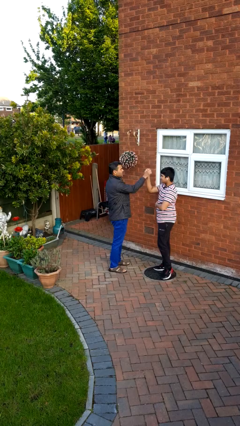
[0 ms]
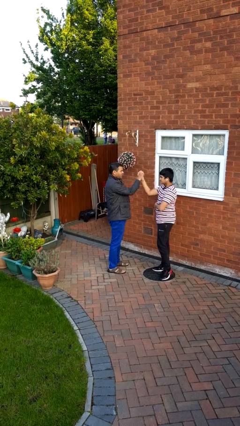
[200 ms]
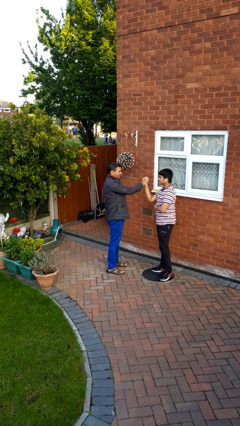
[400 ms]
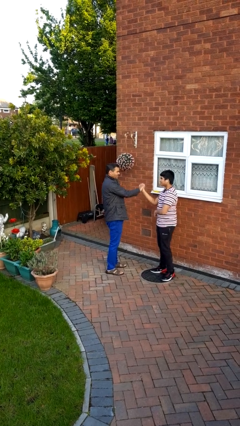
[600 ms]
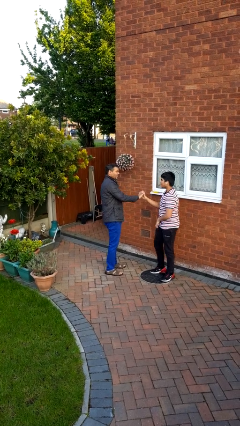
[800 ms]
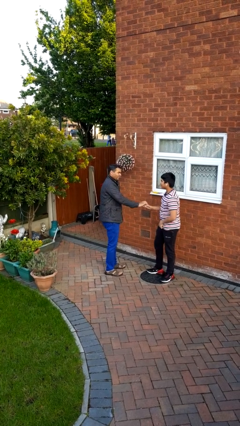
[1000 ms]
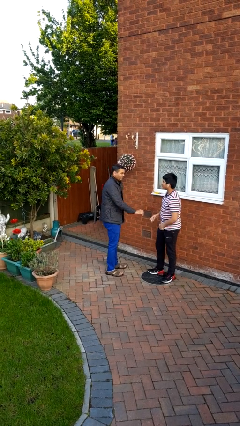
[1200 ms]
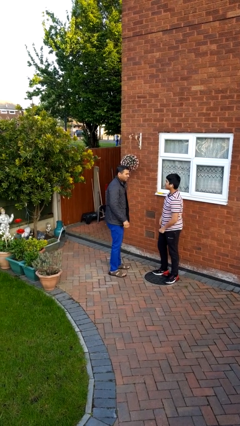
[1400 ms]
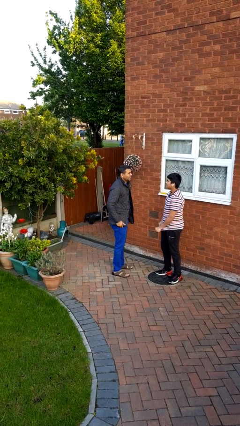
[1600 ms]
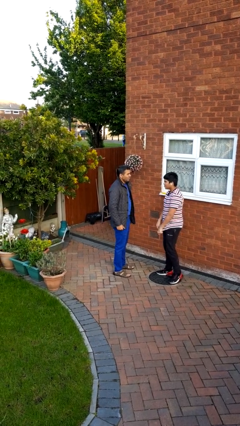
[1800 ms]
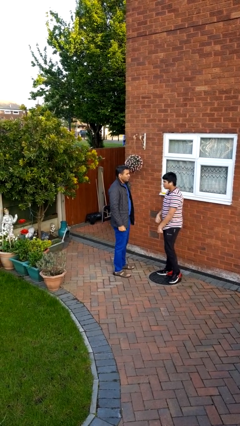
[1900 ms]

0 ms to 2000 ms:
person highfives hand

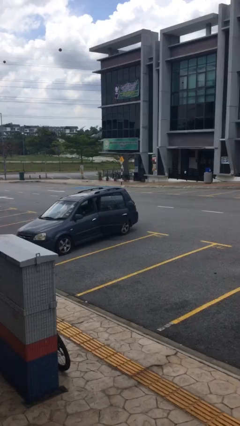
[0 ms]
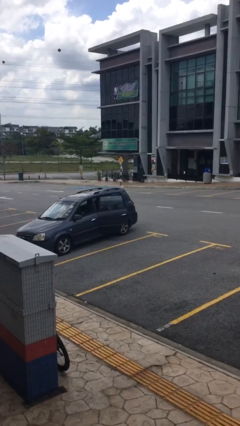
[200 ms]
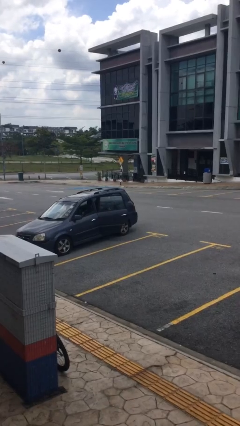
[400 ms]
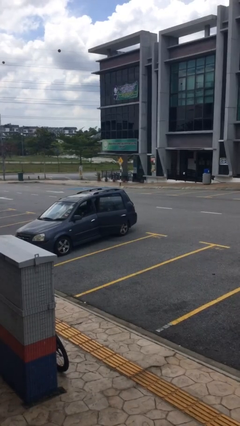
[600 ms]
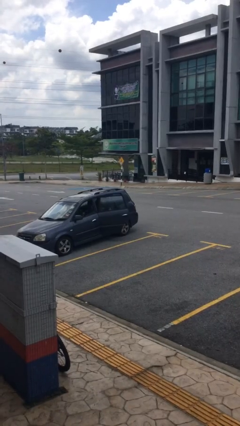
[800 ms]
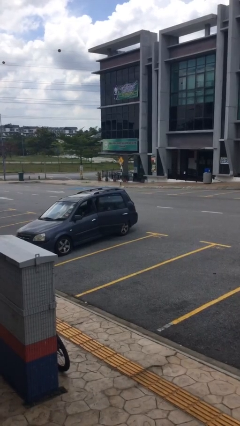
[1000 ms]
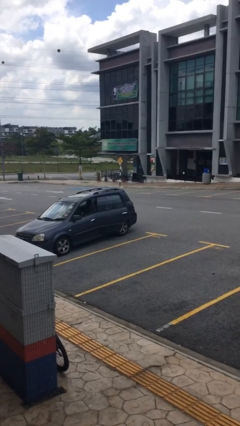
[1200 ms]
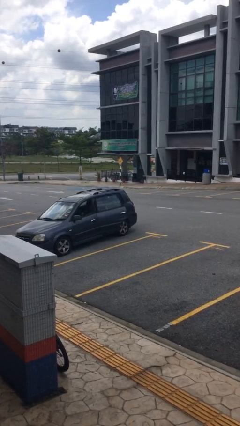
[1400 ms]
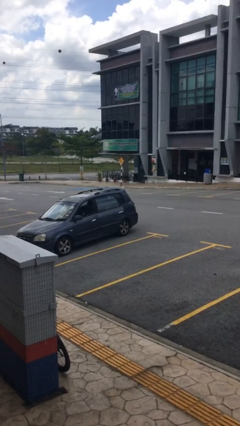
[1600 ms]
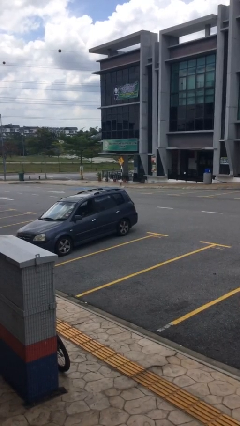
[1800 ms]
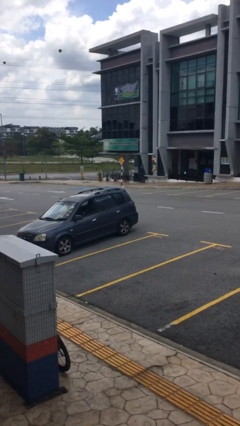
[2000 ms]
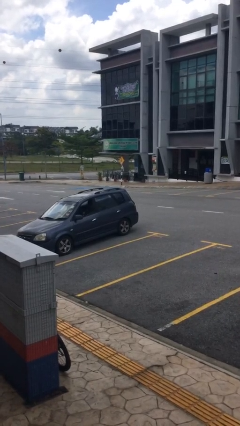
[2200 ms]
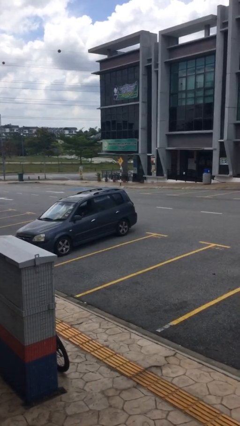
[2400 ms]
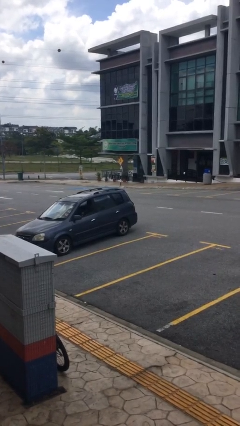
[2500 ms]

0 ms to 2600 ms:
person closes car door

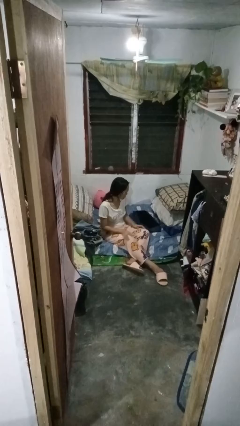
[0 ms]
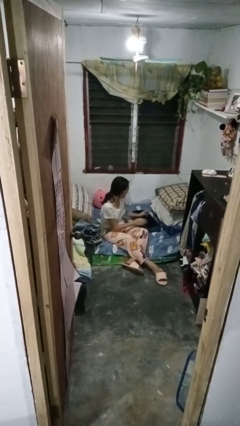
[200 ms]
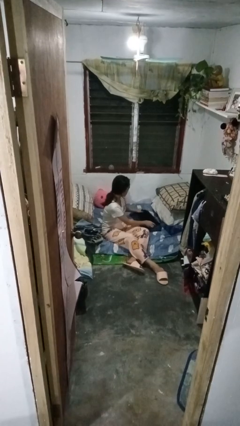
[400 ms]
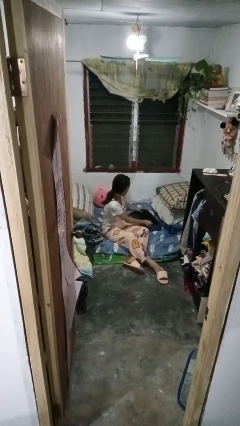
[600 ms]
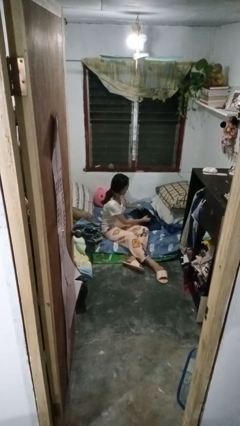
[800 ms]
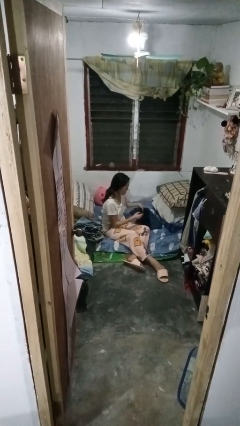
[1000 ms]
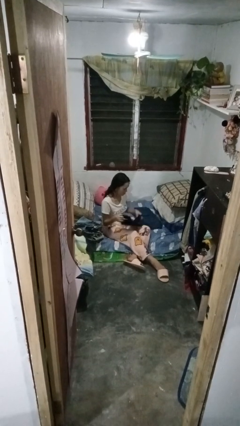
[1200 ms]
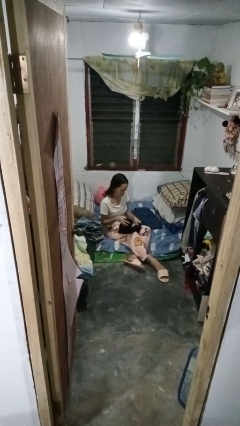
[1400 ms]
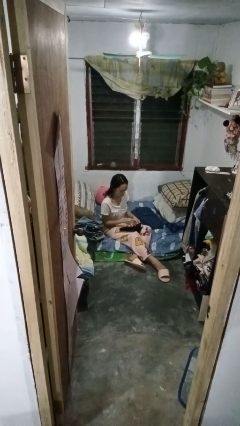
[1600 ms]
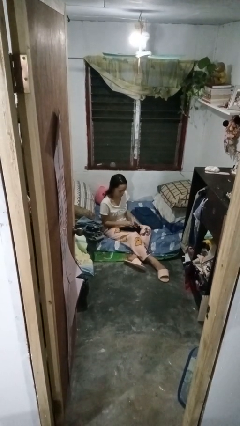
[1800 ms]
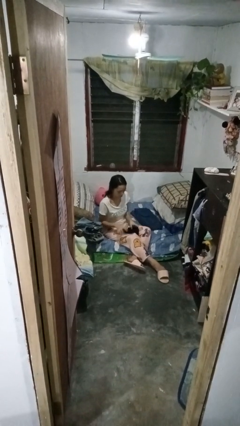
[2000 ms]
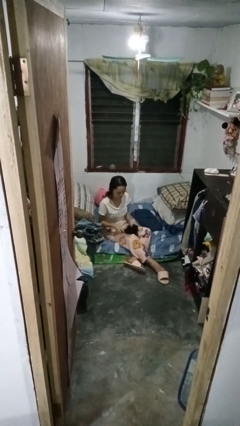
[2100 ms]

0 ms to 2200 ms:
person folds pants

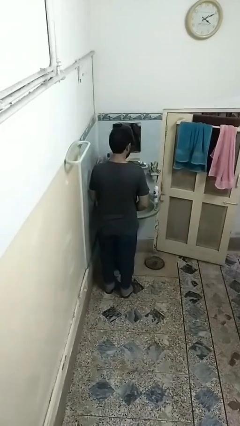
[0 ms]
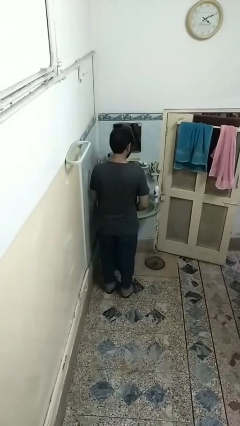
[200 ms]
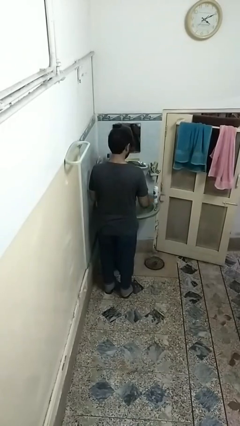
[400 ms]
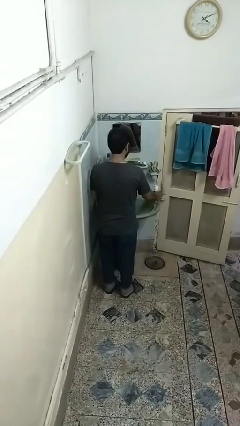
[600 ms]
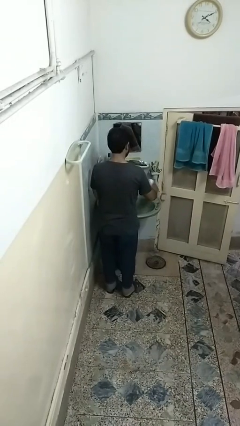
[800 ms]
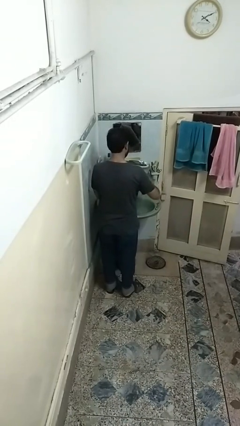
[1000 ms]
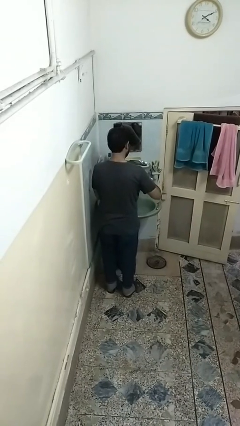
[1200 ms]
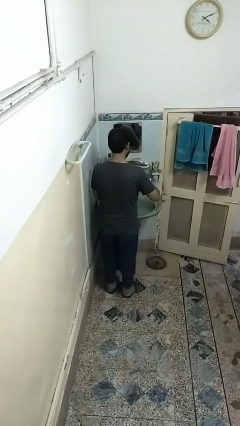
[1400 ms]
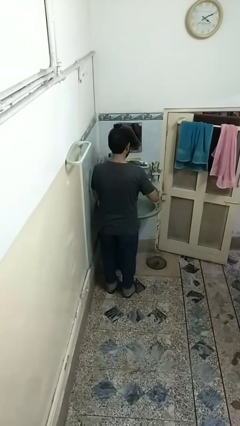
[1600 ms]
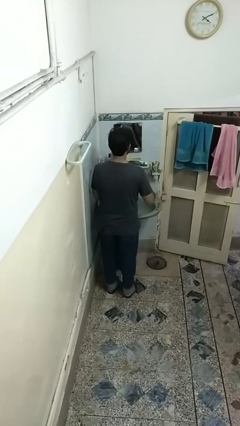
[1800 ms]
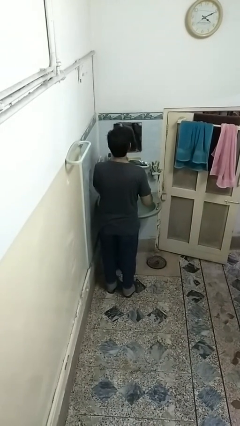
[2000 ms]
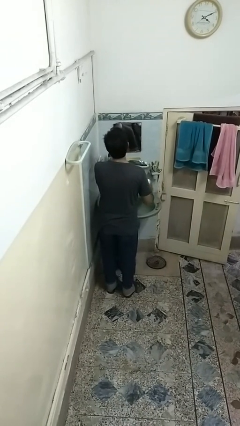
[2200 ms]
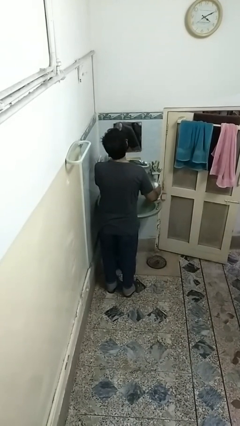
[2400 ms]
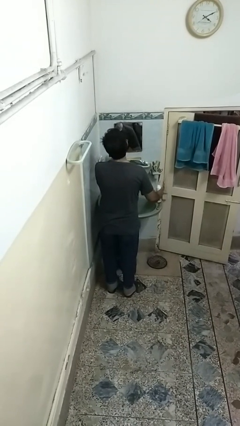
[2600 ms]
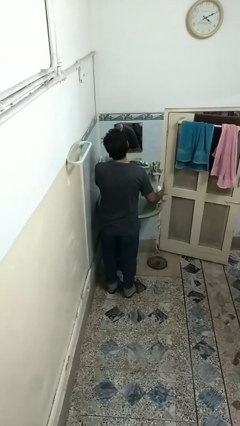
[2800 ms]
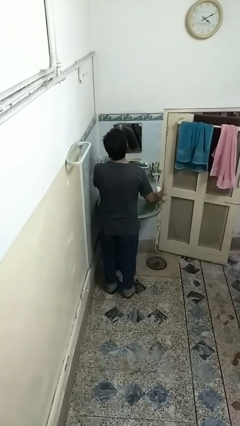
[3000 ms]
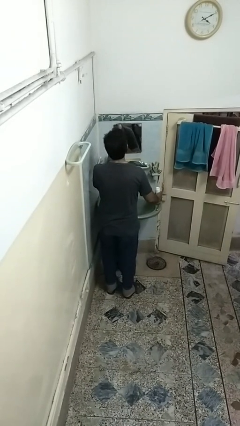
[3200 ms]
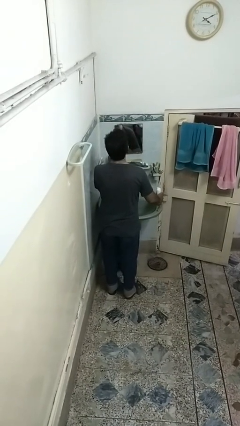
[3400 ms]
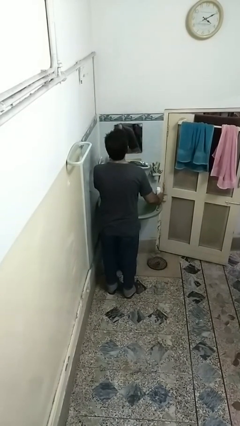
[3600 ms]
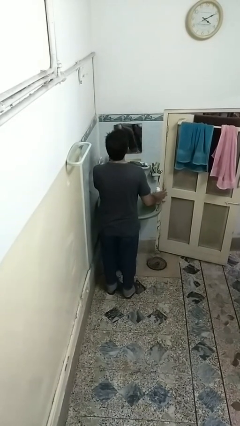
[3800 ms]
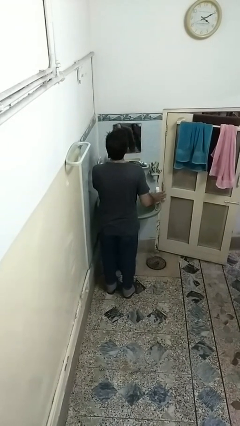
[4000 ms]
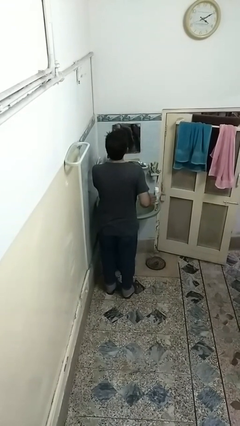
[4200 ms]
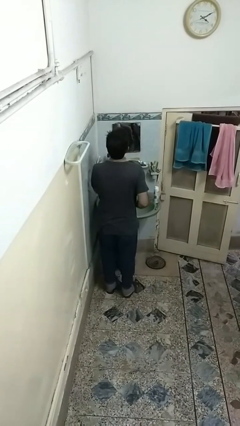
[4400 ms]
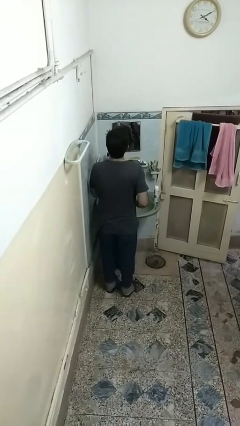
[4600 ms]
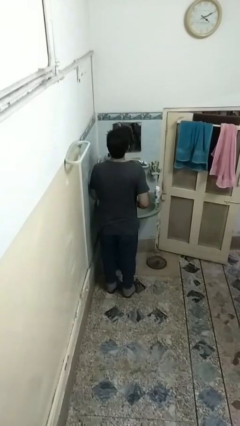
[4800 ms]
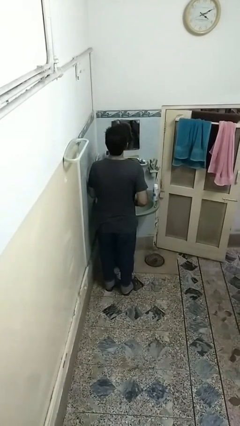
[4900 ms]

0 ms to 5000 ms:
person applies shaving cream

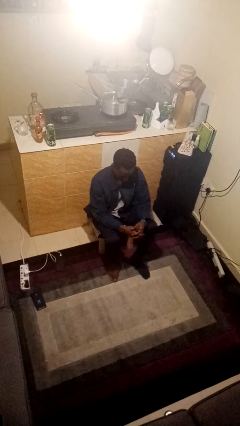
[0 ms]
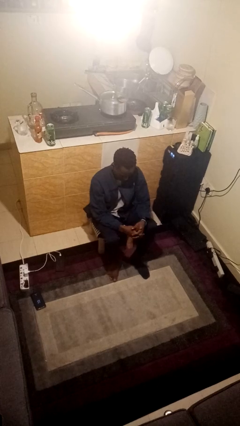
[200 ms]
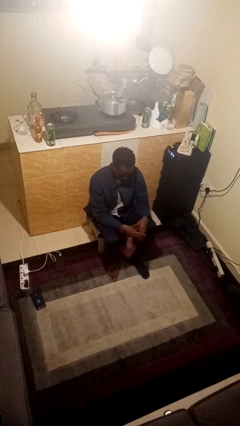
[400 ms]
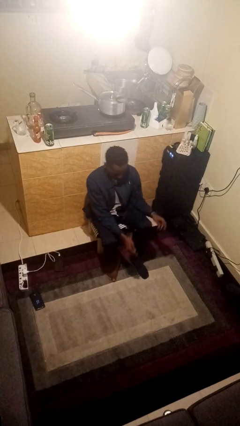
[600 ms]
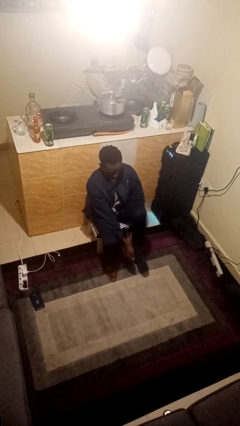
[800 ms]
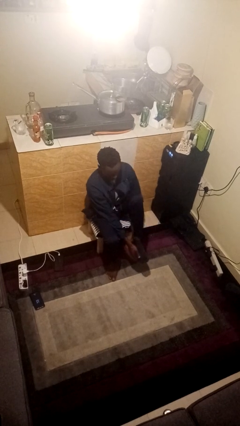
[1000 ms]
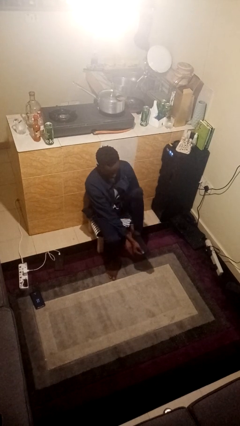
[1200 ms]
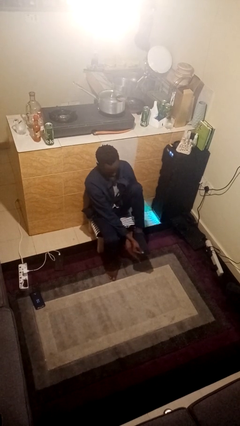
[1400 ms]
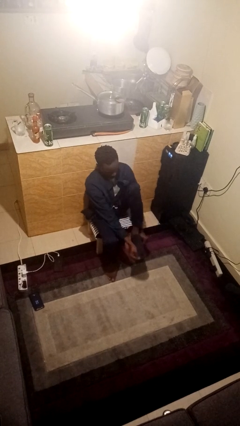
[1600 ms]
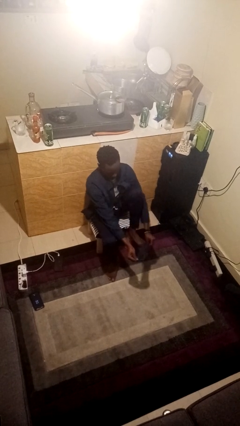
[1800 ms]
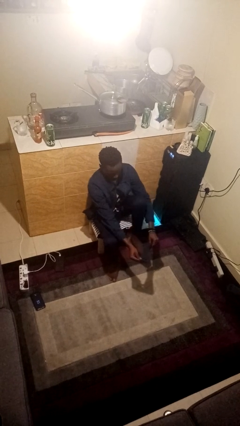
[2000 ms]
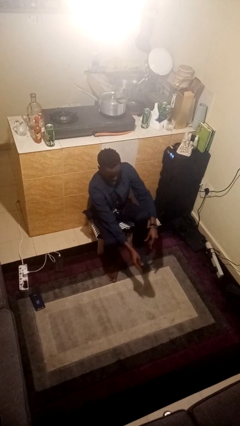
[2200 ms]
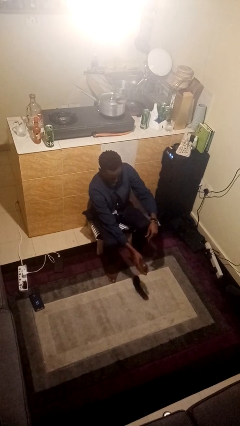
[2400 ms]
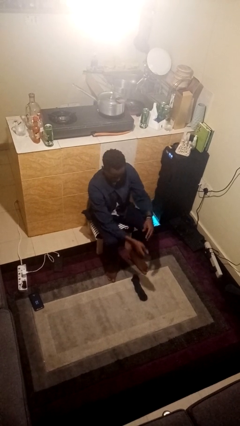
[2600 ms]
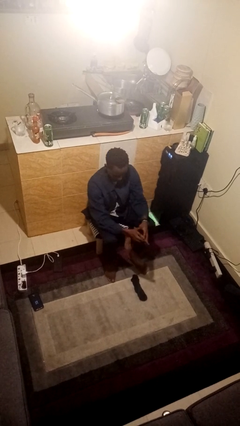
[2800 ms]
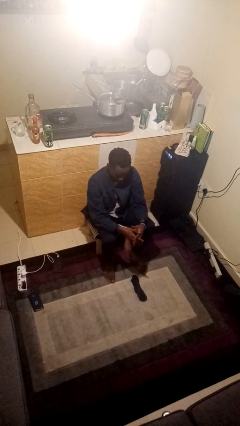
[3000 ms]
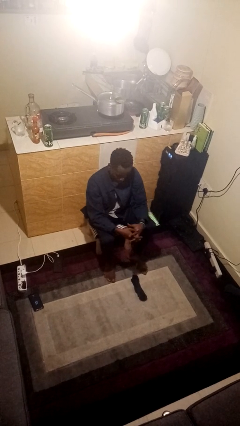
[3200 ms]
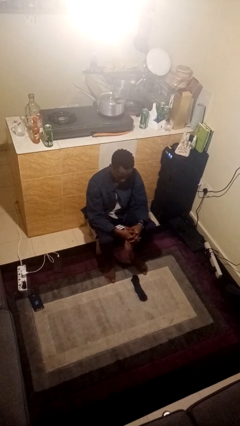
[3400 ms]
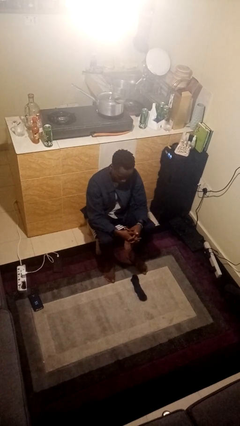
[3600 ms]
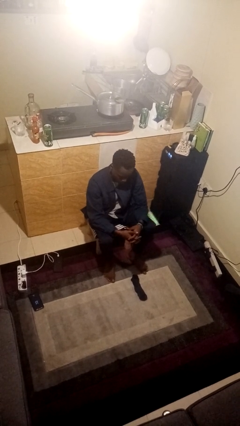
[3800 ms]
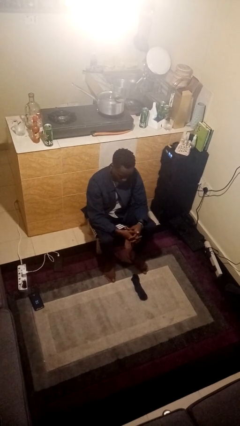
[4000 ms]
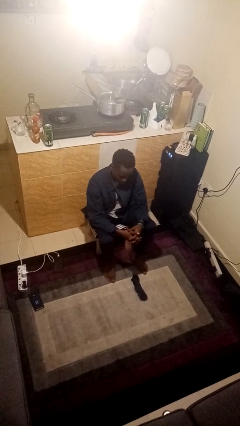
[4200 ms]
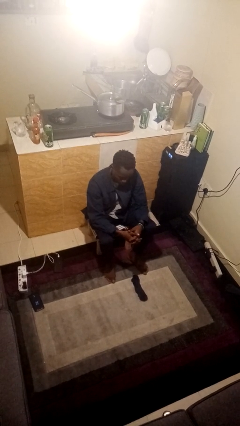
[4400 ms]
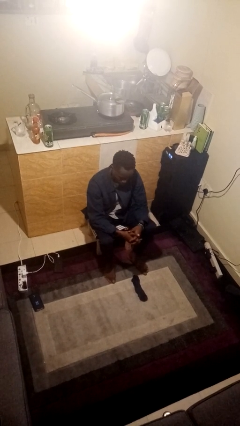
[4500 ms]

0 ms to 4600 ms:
person takes off socks

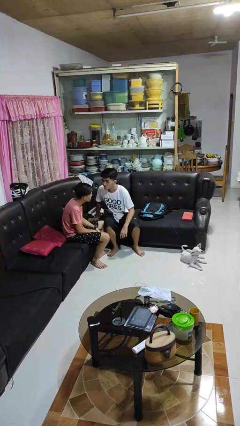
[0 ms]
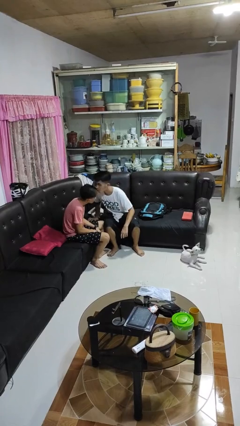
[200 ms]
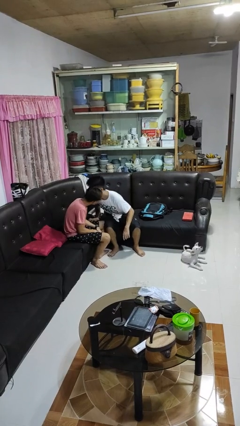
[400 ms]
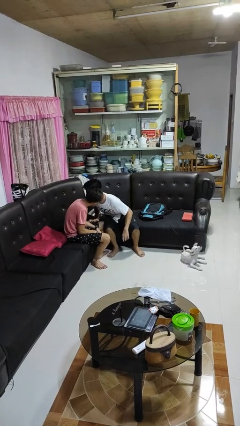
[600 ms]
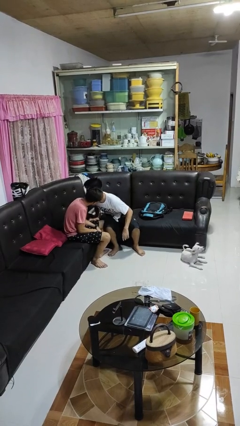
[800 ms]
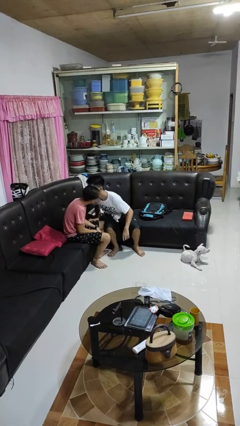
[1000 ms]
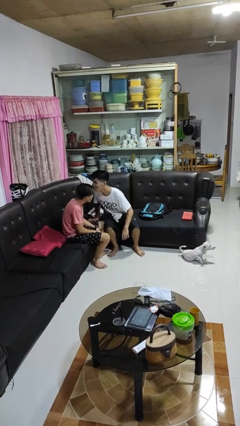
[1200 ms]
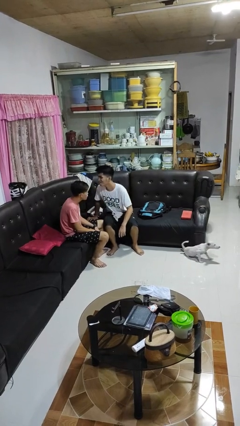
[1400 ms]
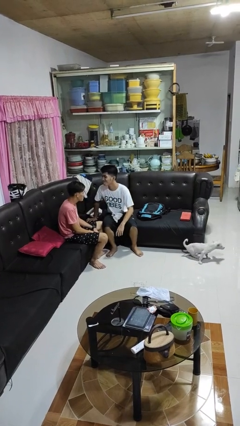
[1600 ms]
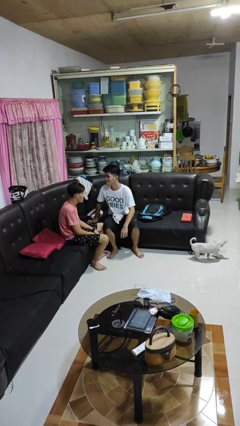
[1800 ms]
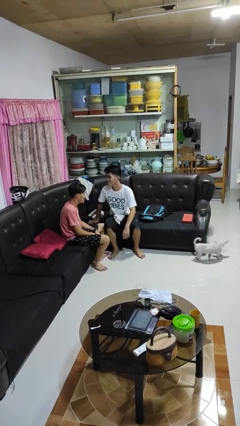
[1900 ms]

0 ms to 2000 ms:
person kisses cheek of person
